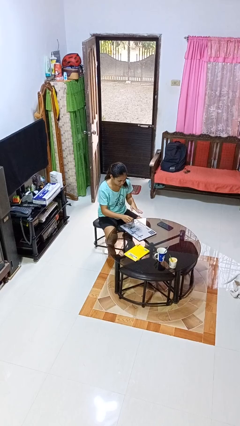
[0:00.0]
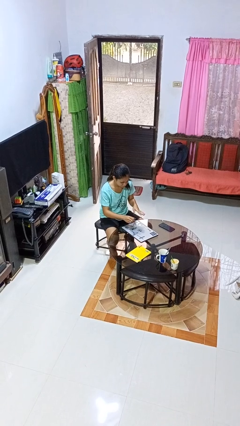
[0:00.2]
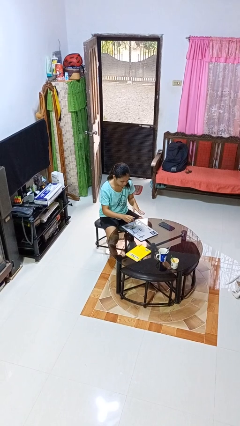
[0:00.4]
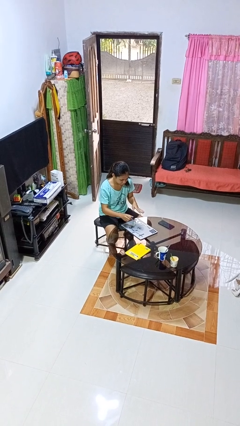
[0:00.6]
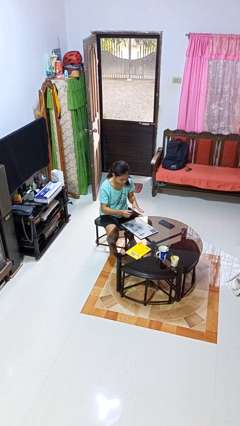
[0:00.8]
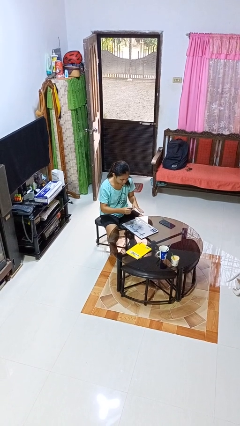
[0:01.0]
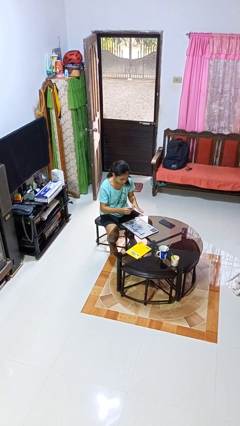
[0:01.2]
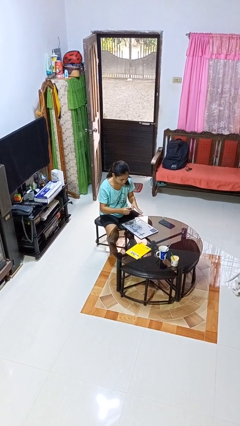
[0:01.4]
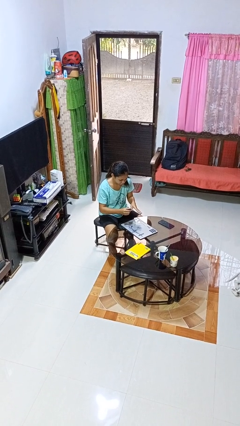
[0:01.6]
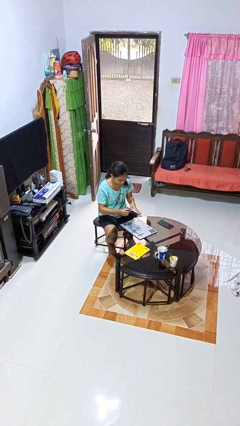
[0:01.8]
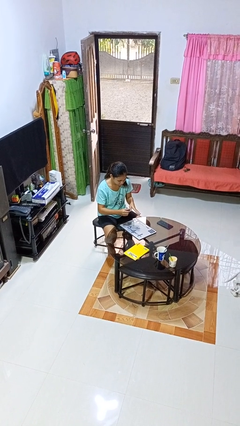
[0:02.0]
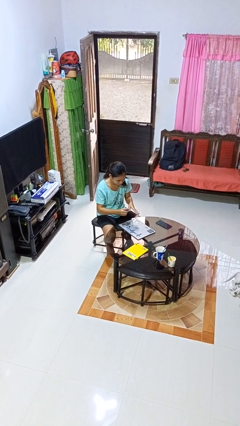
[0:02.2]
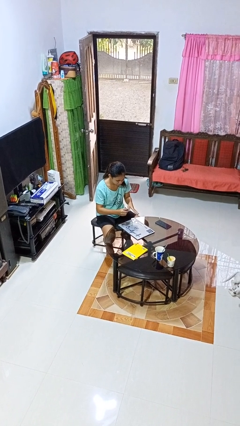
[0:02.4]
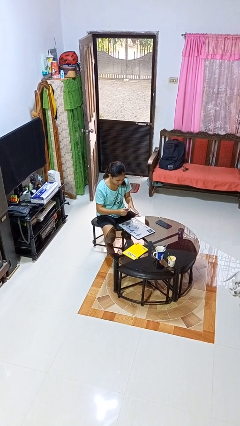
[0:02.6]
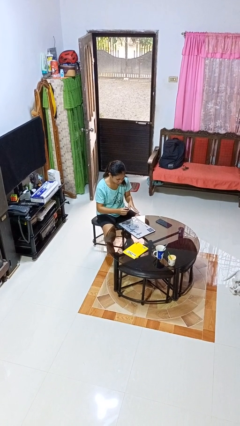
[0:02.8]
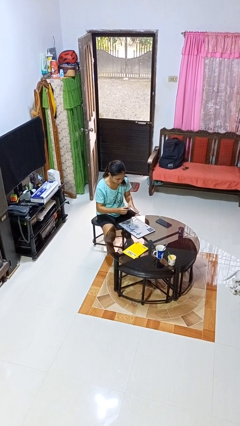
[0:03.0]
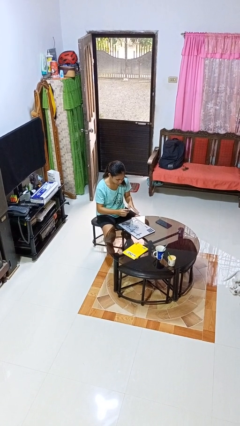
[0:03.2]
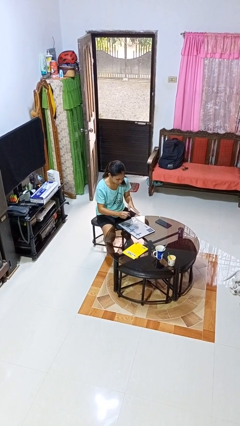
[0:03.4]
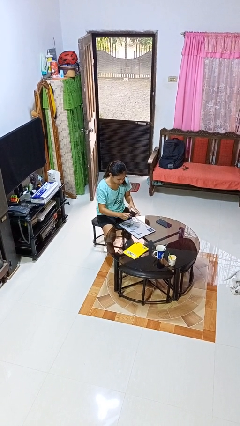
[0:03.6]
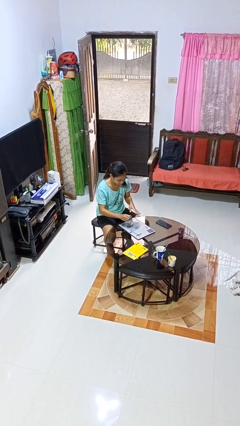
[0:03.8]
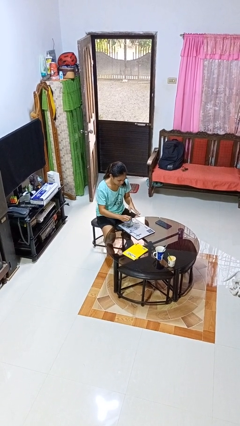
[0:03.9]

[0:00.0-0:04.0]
person paints fingernails

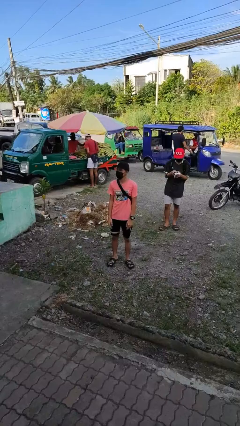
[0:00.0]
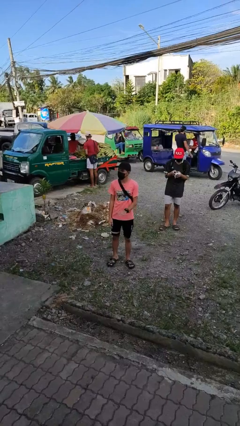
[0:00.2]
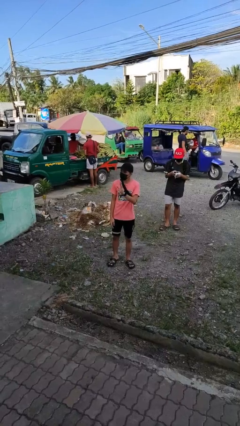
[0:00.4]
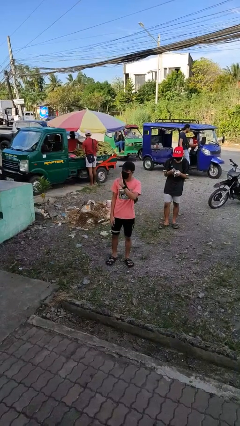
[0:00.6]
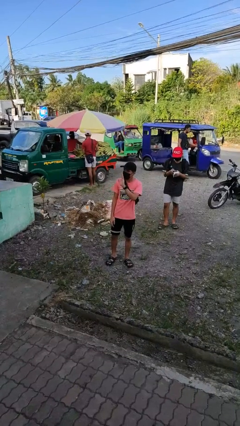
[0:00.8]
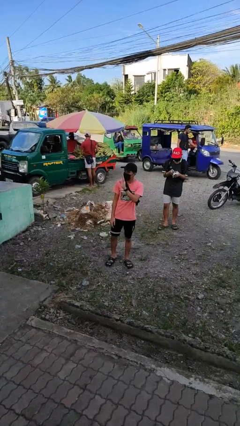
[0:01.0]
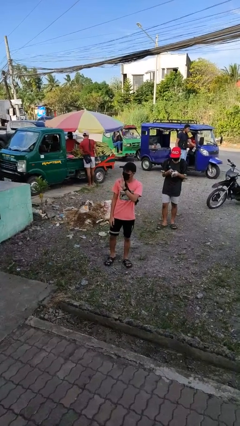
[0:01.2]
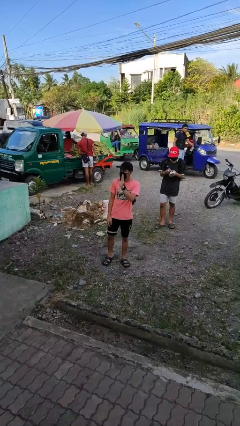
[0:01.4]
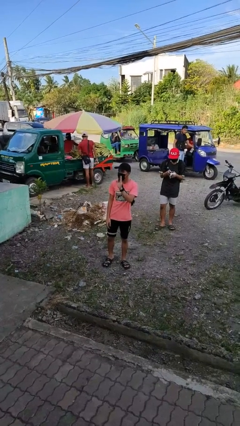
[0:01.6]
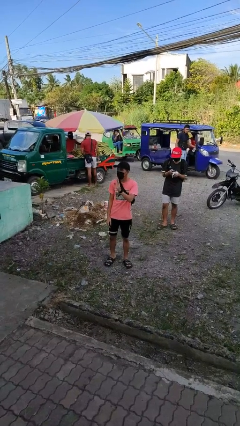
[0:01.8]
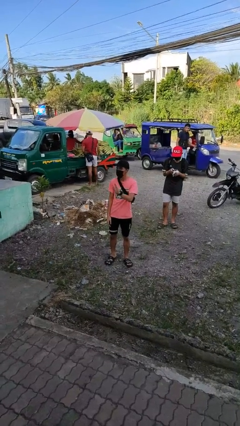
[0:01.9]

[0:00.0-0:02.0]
person waves at person

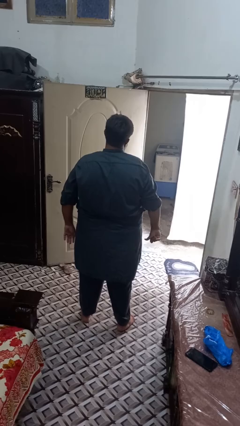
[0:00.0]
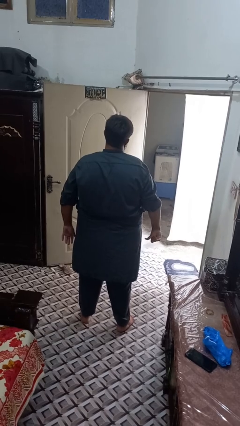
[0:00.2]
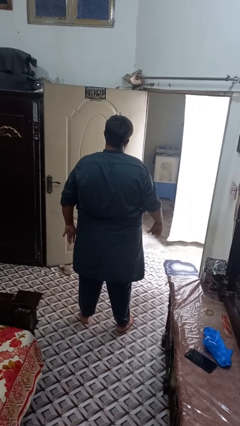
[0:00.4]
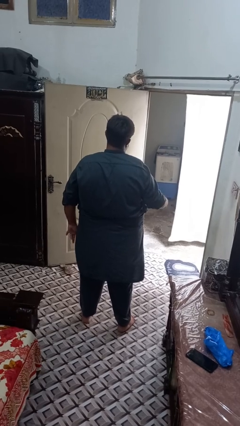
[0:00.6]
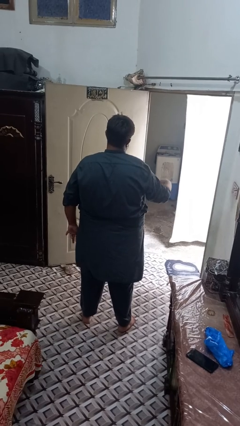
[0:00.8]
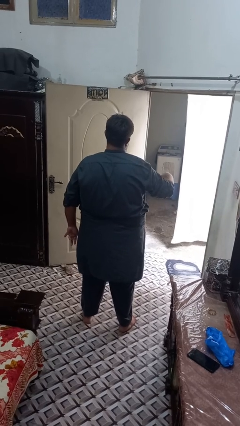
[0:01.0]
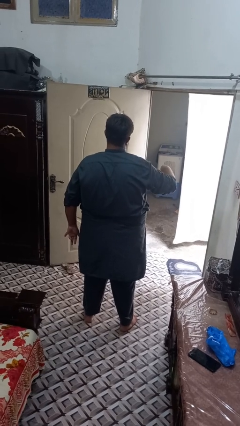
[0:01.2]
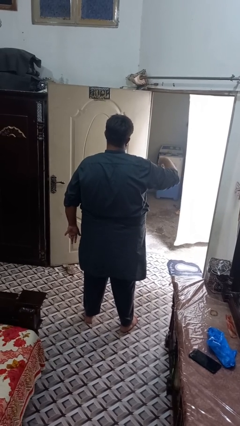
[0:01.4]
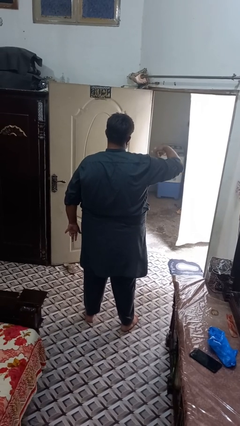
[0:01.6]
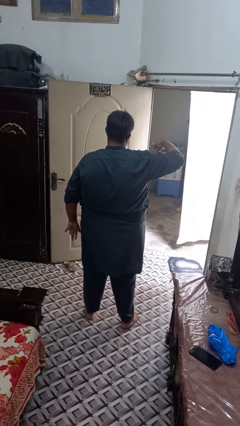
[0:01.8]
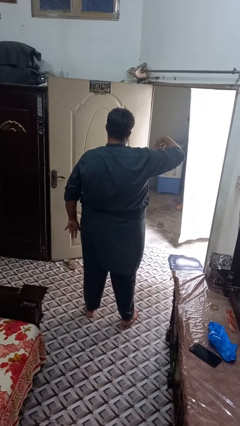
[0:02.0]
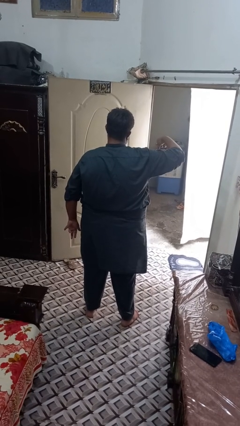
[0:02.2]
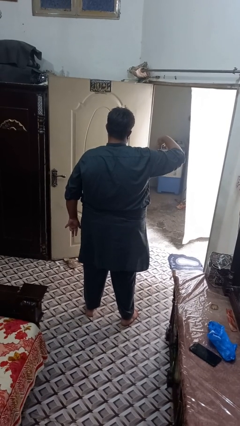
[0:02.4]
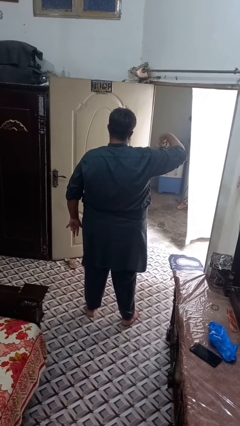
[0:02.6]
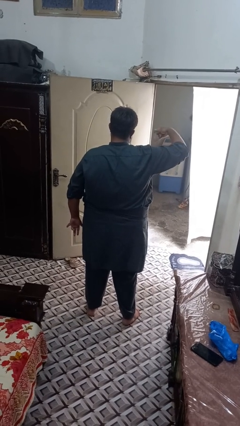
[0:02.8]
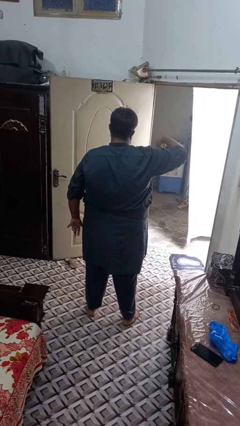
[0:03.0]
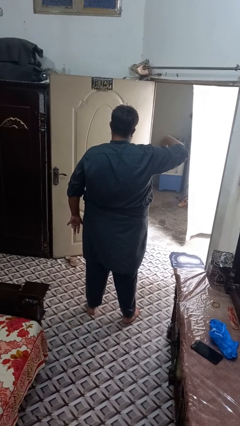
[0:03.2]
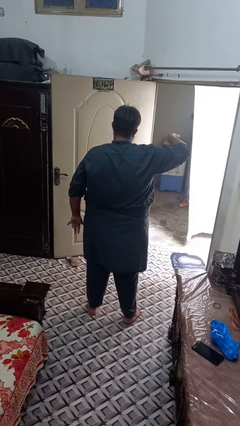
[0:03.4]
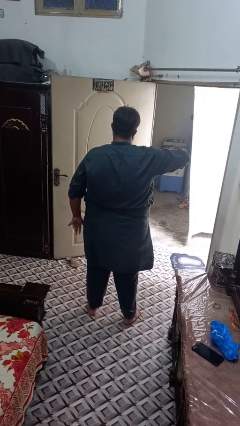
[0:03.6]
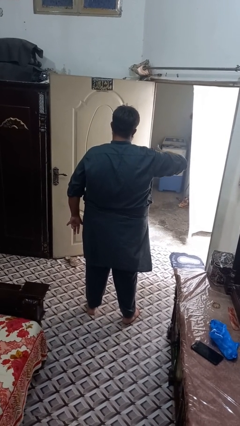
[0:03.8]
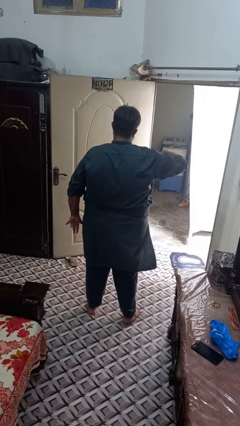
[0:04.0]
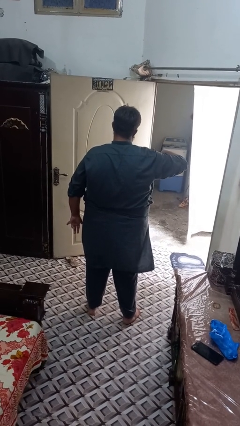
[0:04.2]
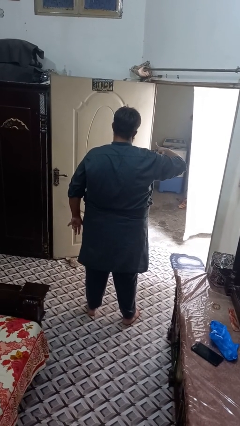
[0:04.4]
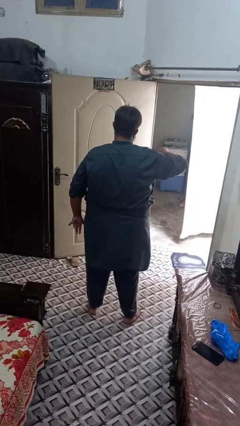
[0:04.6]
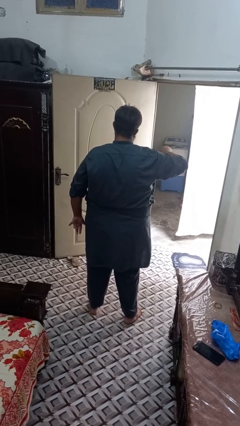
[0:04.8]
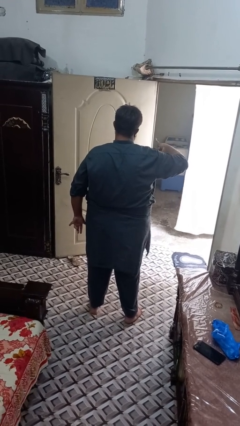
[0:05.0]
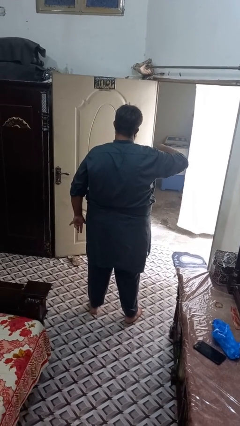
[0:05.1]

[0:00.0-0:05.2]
person gestures hang loose

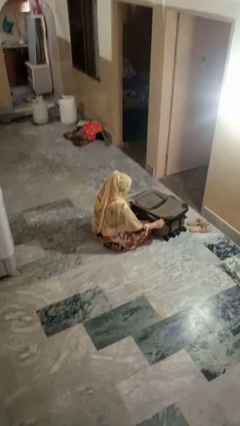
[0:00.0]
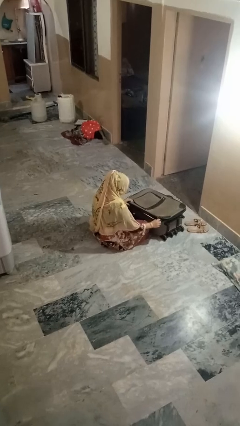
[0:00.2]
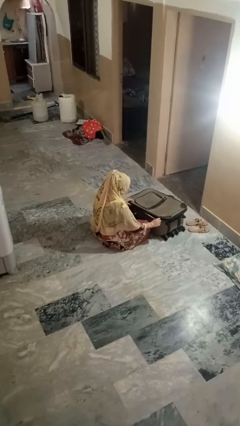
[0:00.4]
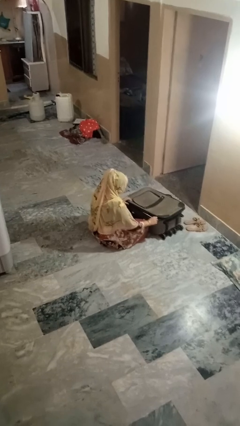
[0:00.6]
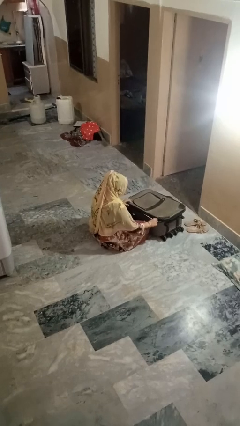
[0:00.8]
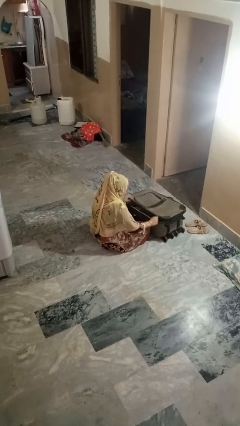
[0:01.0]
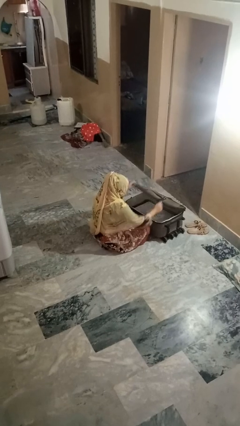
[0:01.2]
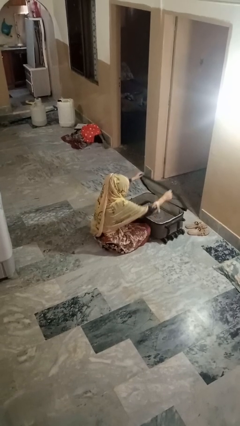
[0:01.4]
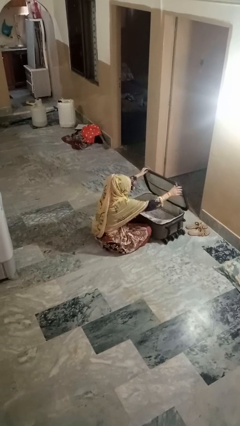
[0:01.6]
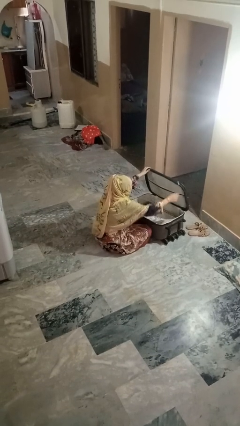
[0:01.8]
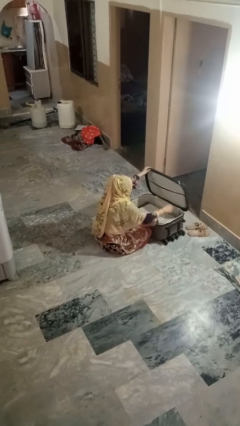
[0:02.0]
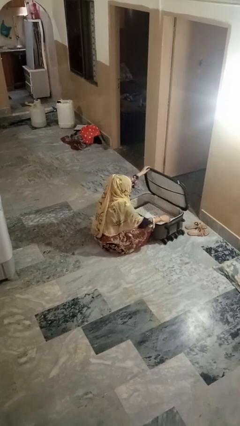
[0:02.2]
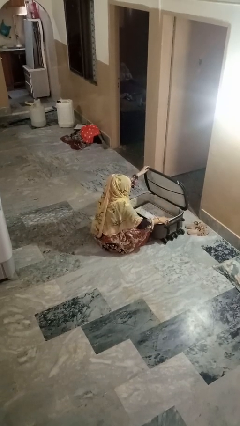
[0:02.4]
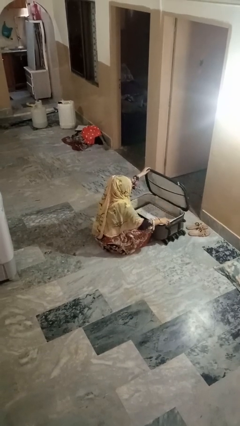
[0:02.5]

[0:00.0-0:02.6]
person opens suitcase

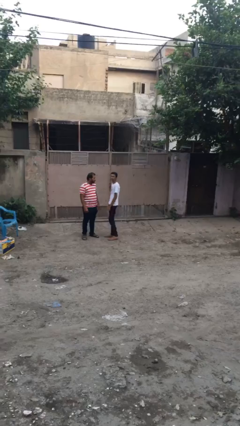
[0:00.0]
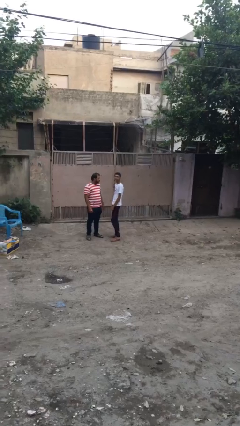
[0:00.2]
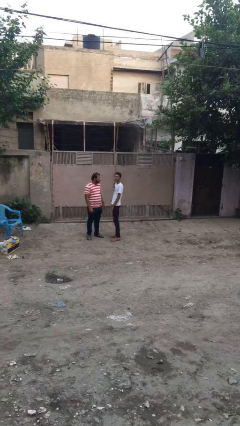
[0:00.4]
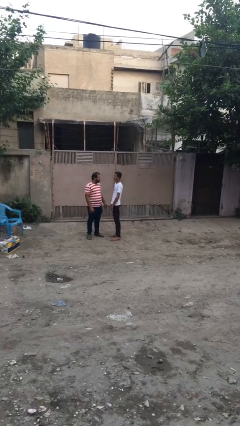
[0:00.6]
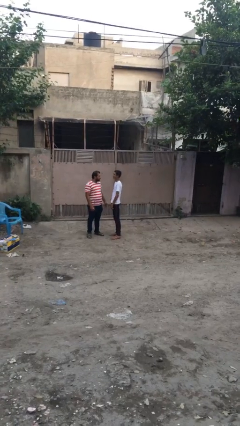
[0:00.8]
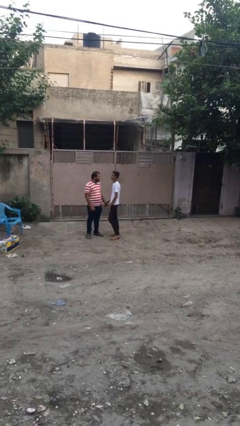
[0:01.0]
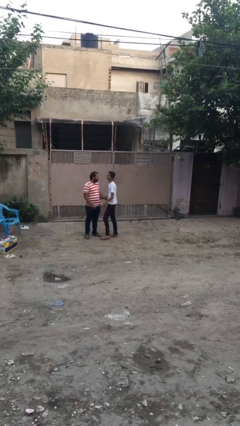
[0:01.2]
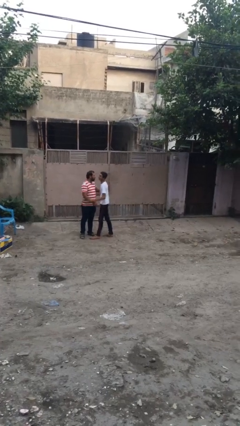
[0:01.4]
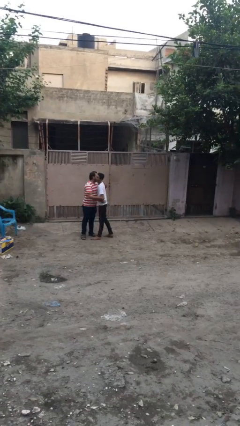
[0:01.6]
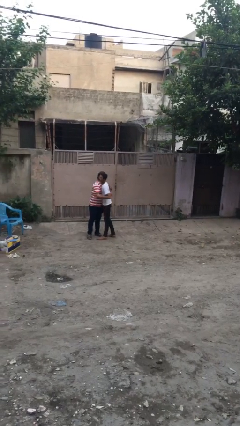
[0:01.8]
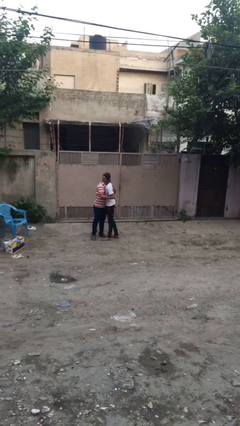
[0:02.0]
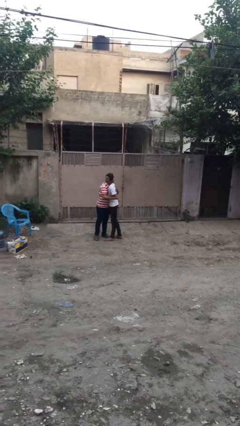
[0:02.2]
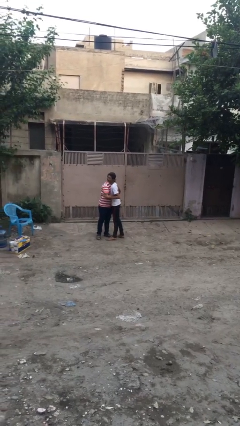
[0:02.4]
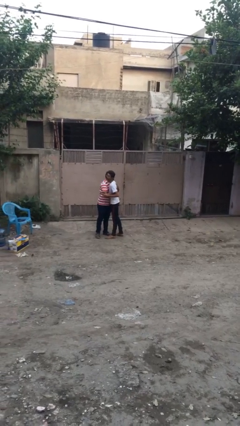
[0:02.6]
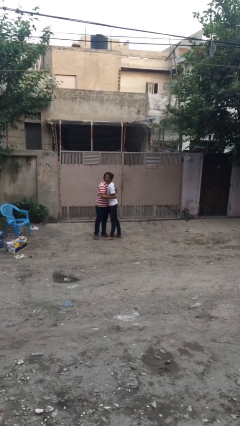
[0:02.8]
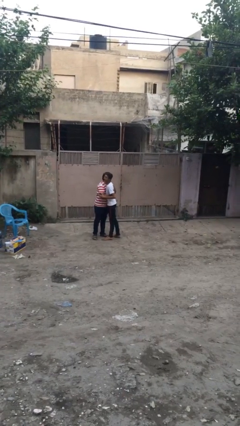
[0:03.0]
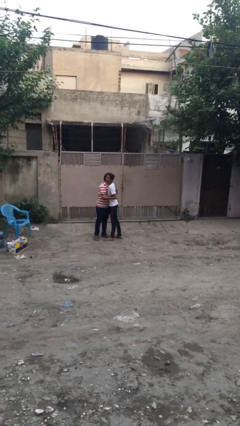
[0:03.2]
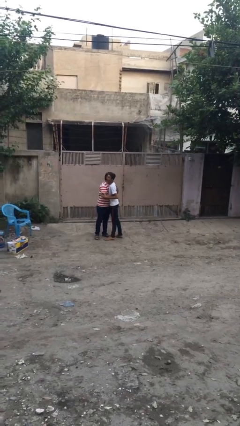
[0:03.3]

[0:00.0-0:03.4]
person embraces person
